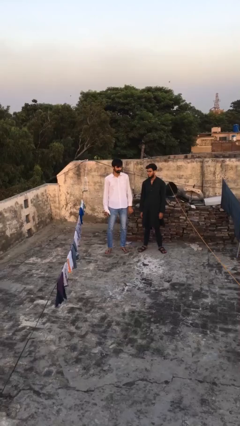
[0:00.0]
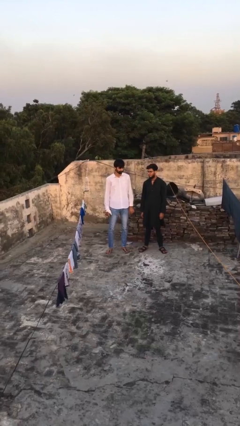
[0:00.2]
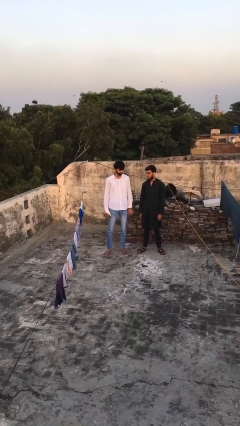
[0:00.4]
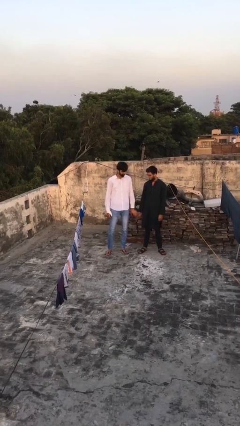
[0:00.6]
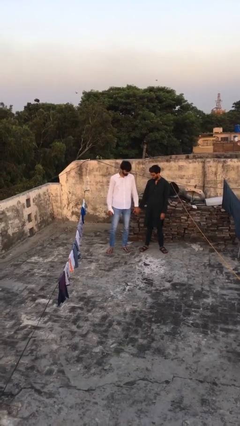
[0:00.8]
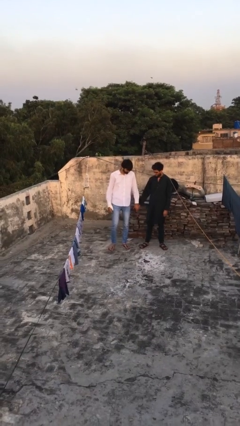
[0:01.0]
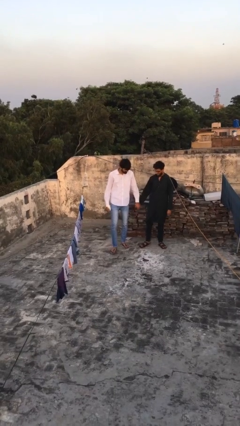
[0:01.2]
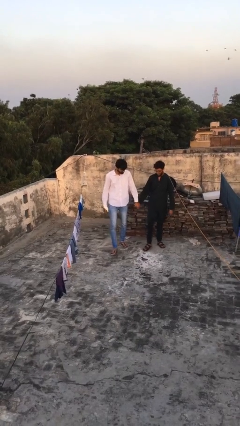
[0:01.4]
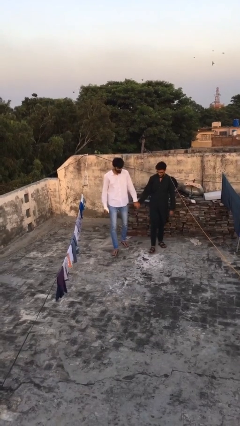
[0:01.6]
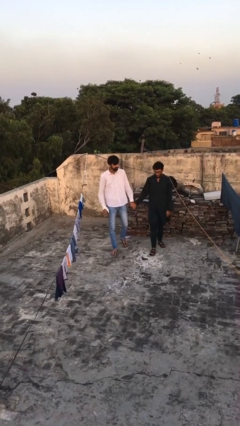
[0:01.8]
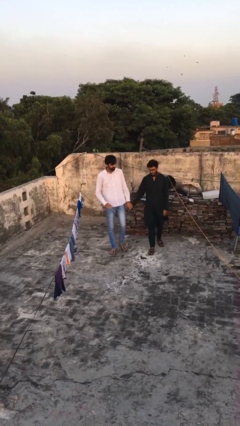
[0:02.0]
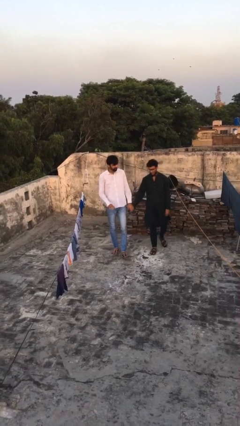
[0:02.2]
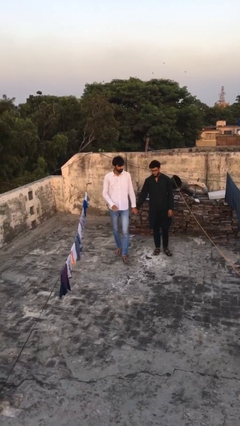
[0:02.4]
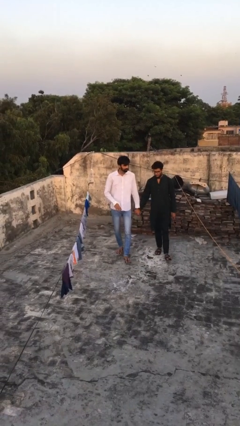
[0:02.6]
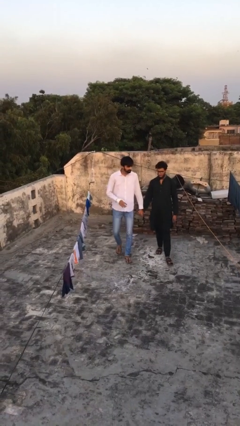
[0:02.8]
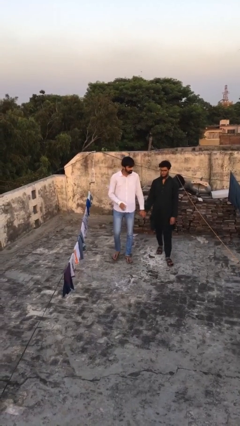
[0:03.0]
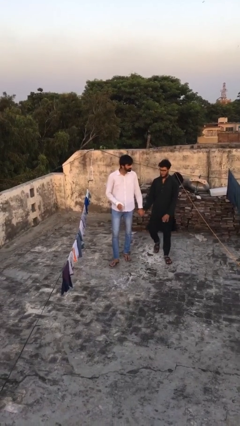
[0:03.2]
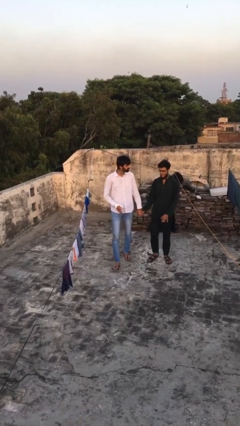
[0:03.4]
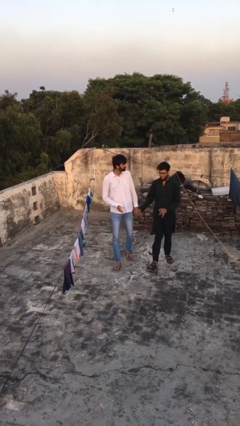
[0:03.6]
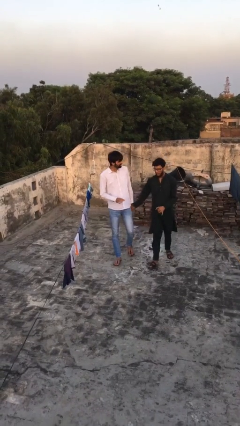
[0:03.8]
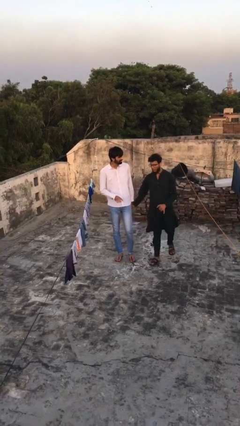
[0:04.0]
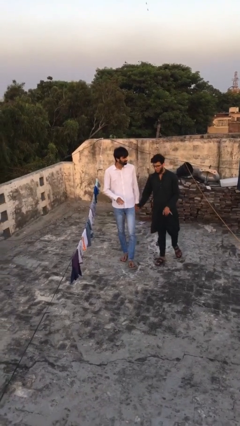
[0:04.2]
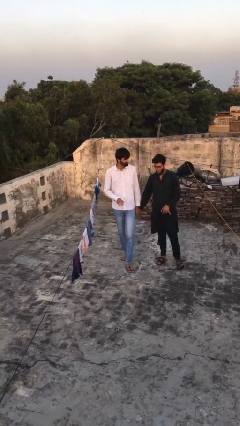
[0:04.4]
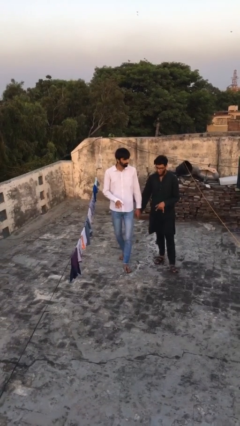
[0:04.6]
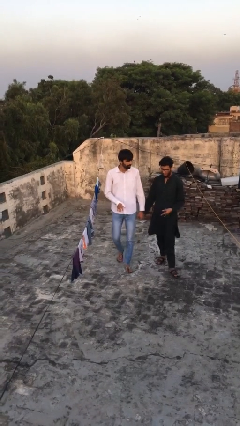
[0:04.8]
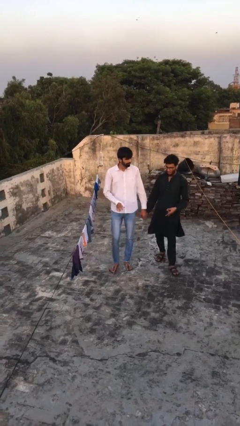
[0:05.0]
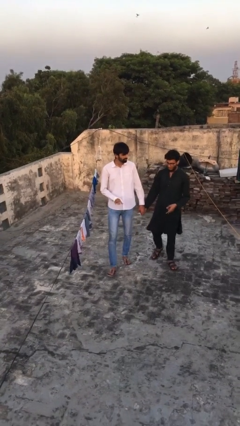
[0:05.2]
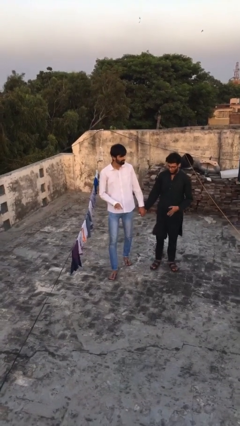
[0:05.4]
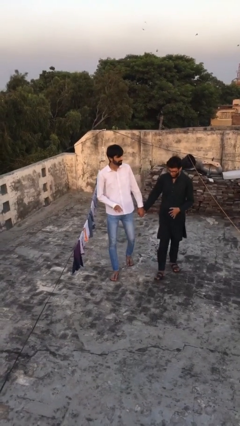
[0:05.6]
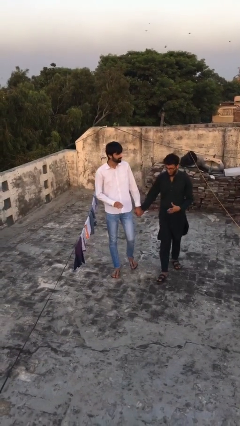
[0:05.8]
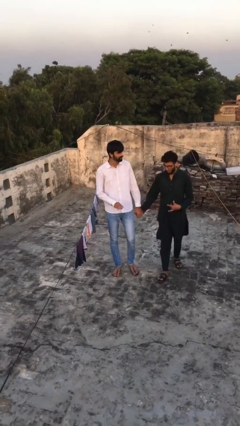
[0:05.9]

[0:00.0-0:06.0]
person holds hand

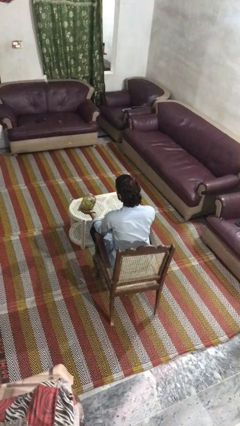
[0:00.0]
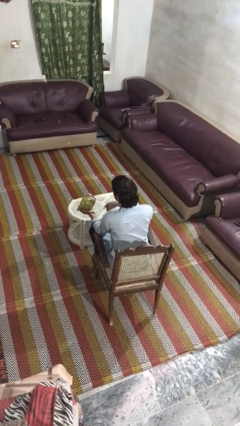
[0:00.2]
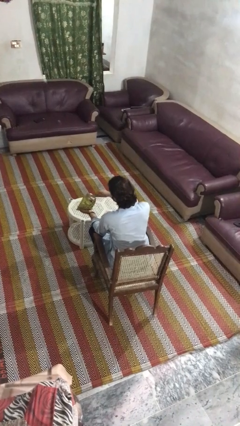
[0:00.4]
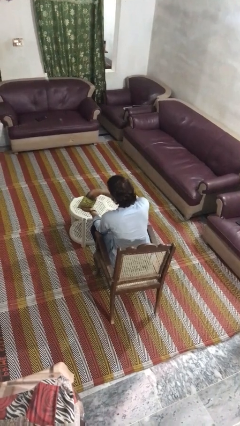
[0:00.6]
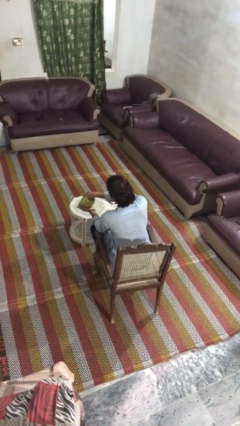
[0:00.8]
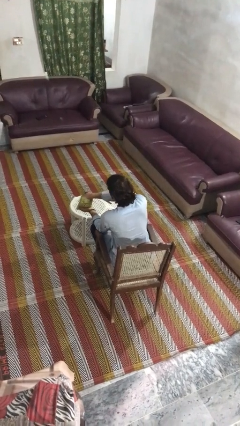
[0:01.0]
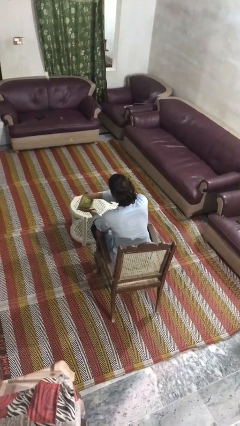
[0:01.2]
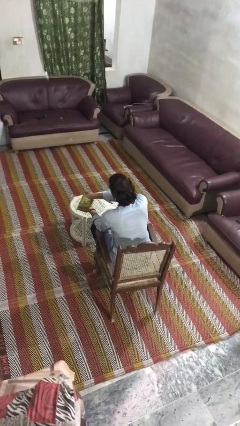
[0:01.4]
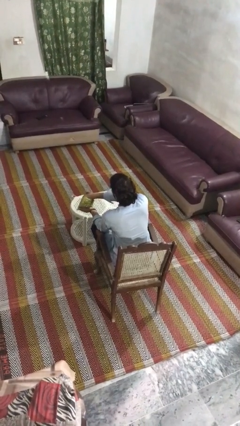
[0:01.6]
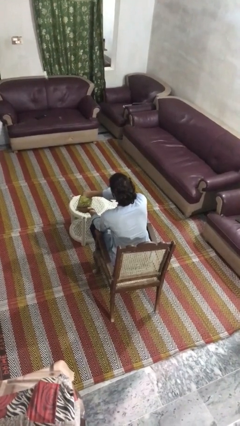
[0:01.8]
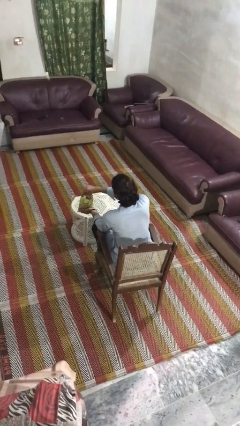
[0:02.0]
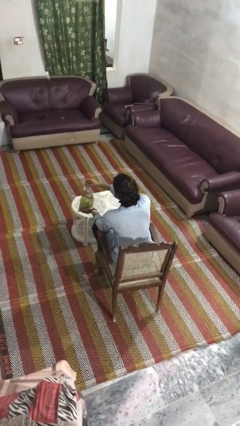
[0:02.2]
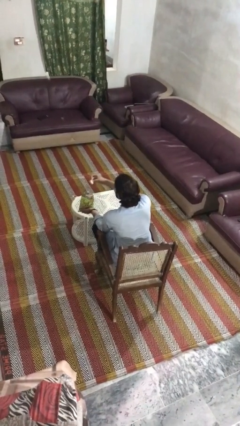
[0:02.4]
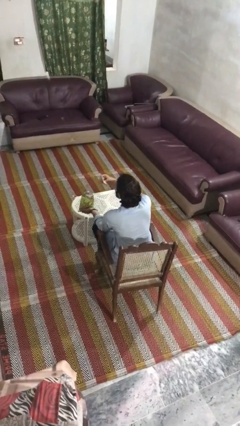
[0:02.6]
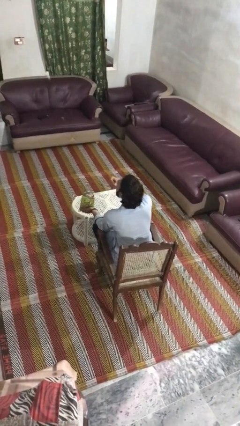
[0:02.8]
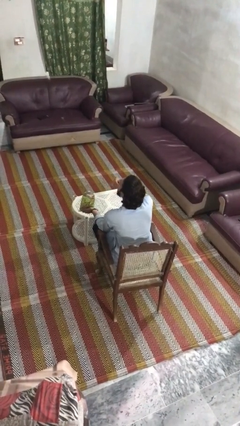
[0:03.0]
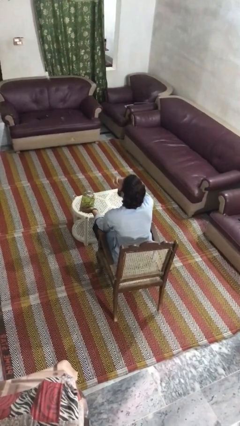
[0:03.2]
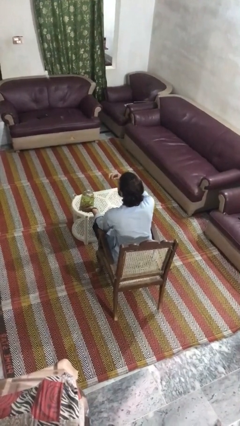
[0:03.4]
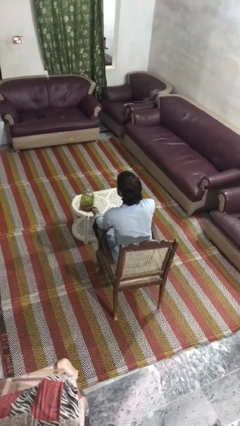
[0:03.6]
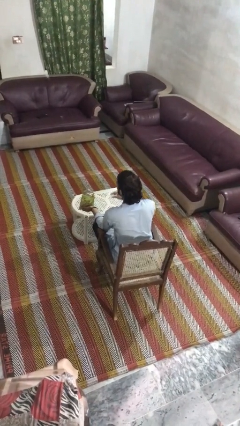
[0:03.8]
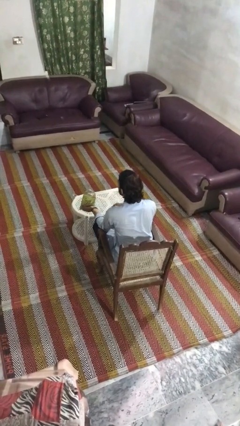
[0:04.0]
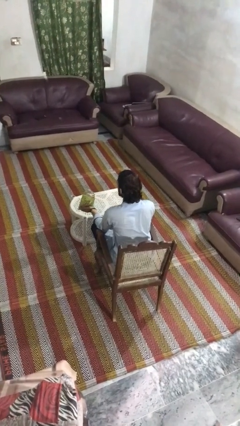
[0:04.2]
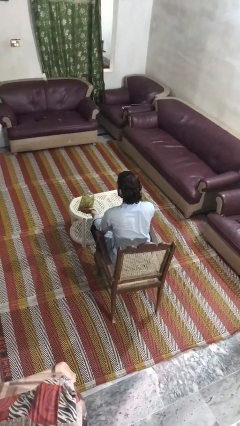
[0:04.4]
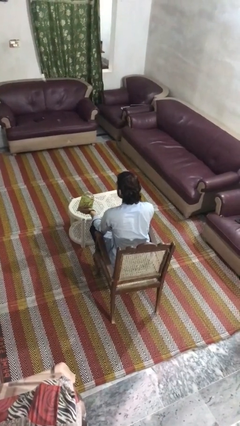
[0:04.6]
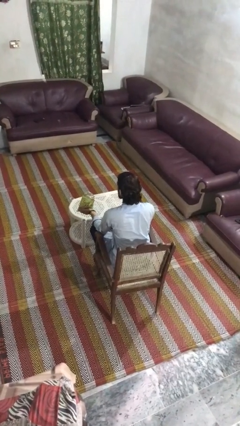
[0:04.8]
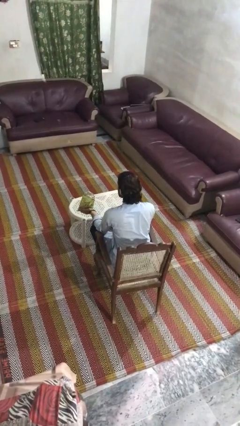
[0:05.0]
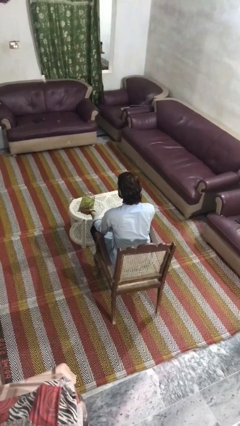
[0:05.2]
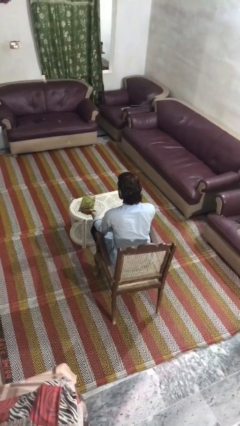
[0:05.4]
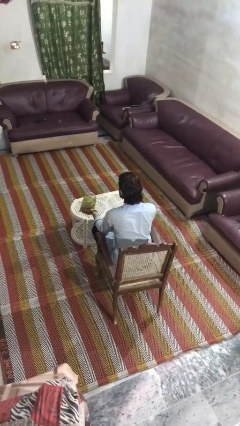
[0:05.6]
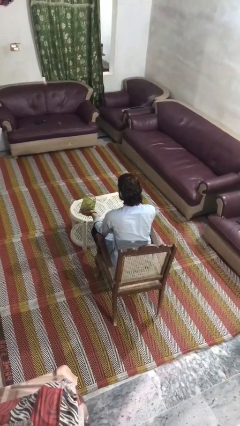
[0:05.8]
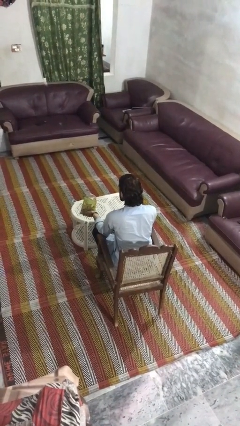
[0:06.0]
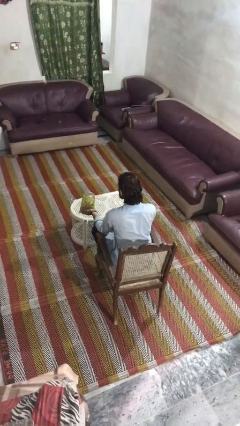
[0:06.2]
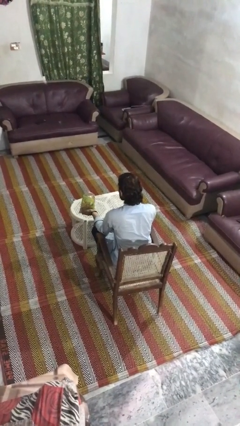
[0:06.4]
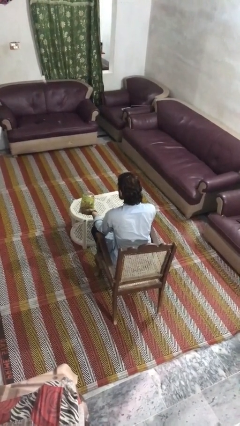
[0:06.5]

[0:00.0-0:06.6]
person eats snack from bag

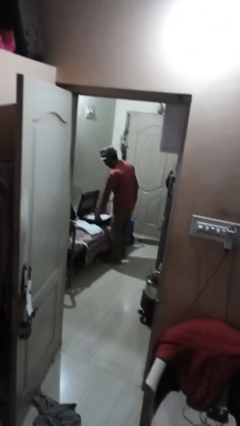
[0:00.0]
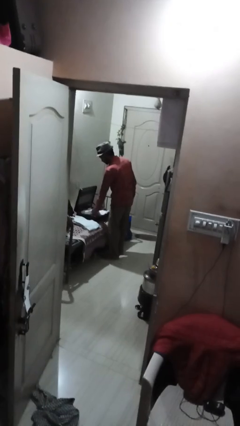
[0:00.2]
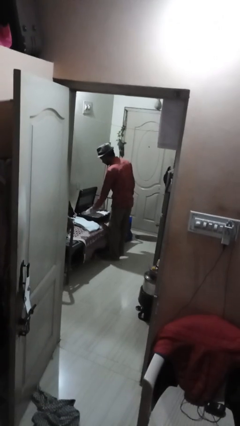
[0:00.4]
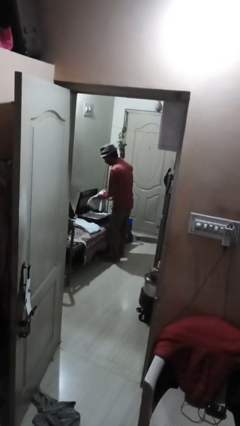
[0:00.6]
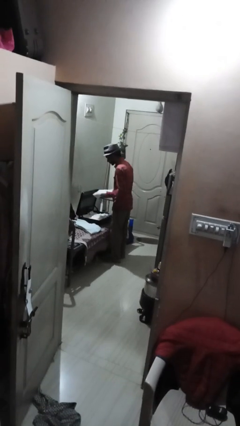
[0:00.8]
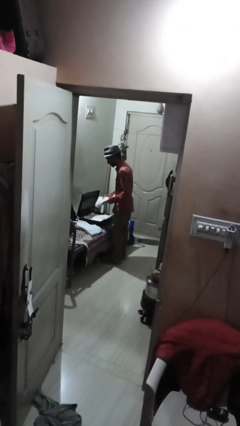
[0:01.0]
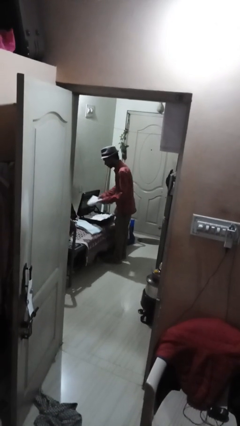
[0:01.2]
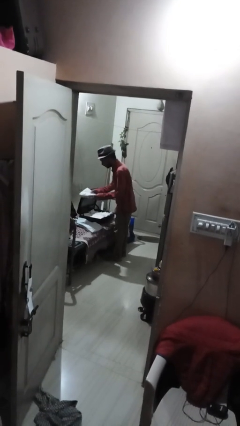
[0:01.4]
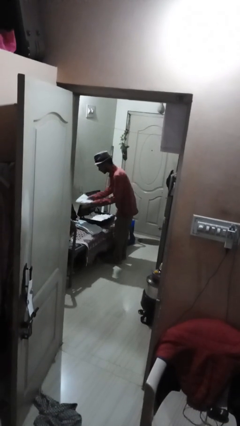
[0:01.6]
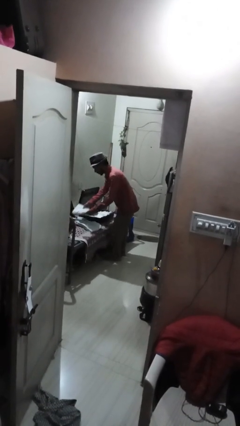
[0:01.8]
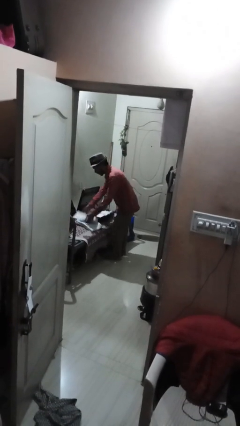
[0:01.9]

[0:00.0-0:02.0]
person unloads clothes from suitcase

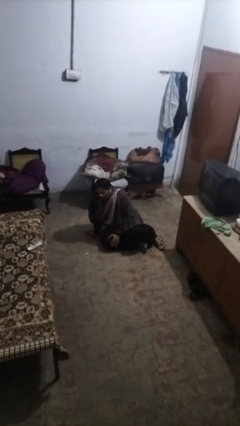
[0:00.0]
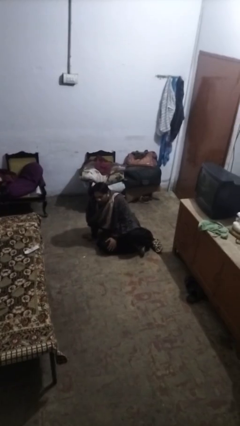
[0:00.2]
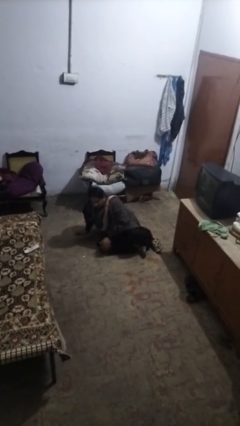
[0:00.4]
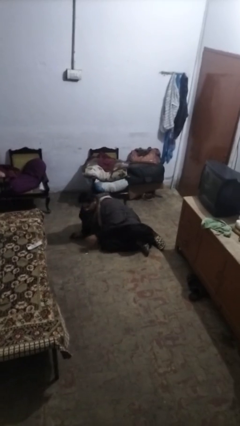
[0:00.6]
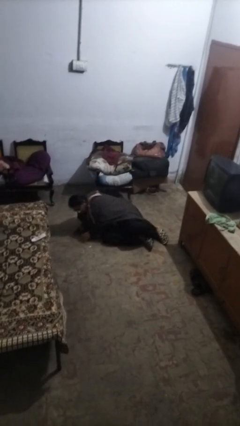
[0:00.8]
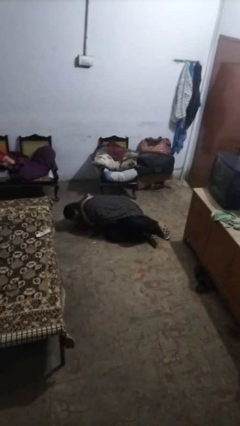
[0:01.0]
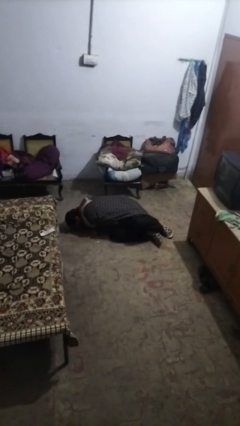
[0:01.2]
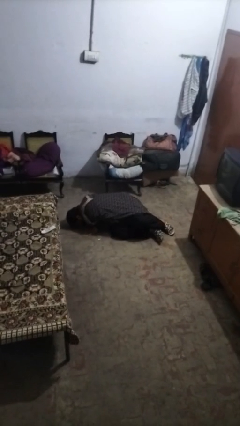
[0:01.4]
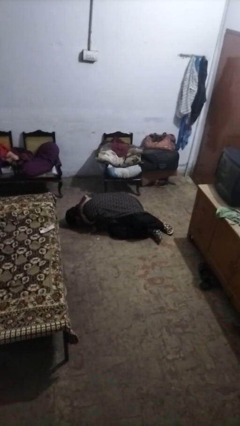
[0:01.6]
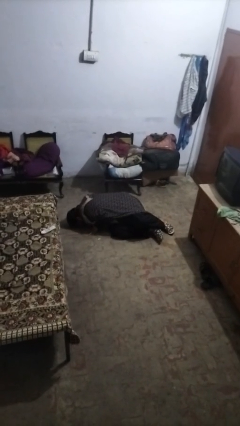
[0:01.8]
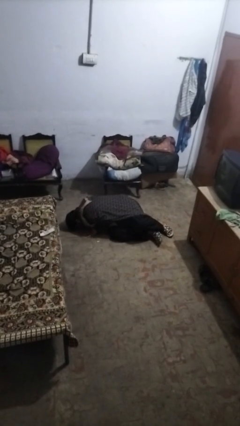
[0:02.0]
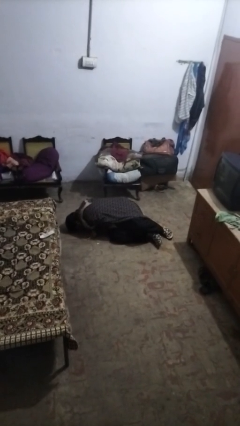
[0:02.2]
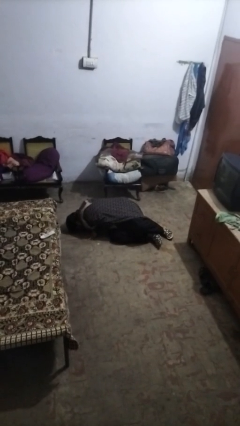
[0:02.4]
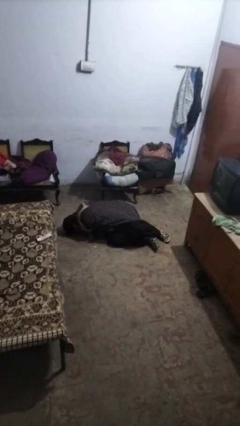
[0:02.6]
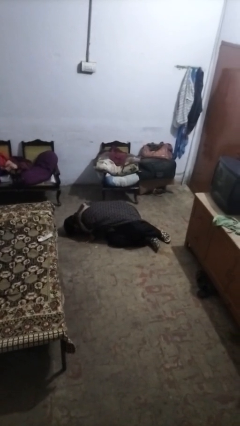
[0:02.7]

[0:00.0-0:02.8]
person lies down on floor

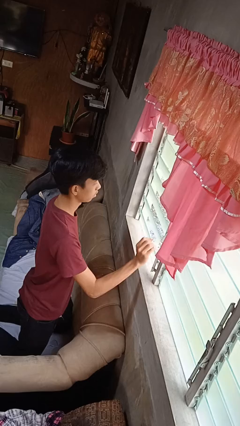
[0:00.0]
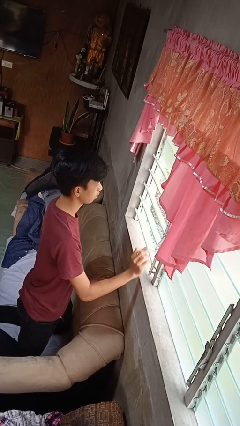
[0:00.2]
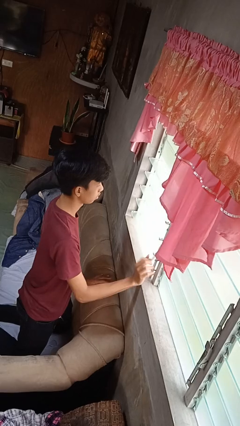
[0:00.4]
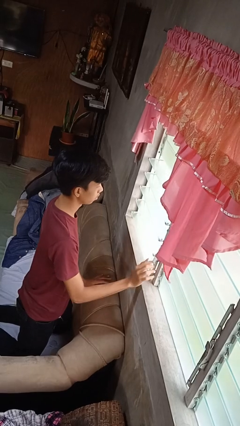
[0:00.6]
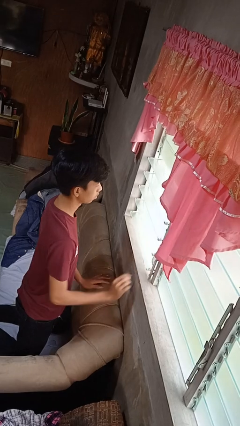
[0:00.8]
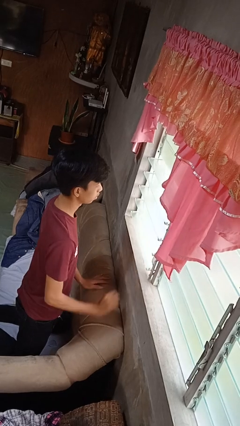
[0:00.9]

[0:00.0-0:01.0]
person opens home window
